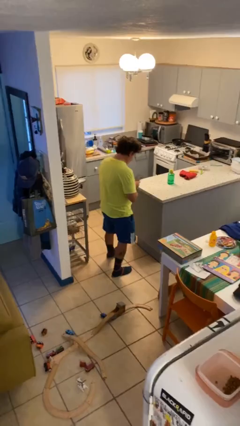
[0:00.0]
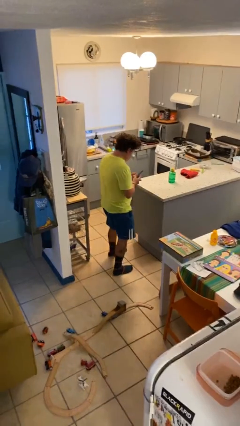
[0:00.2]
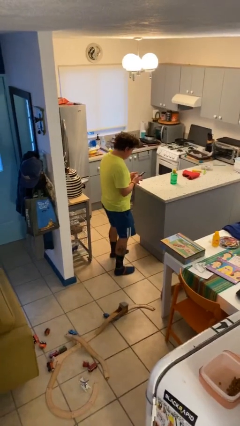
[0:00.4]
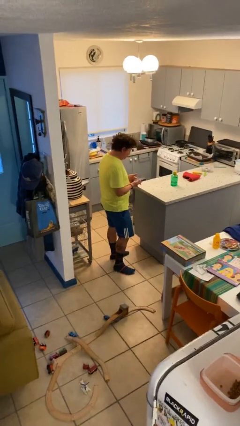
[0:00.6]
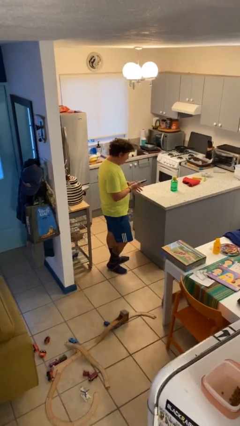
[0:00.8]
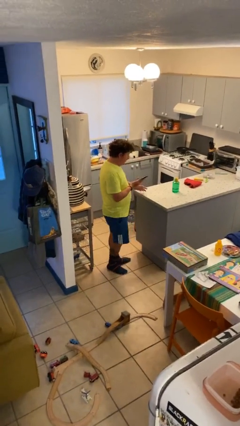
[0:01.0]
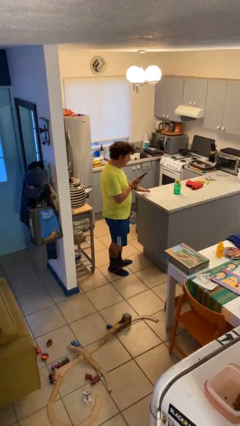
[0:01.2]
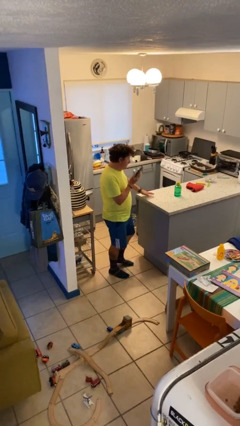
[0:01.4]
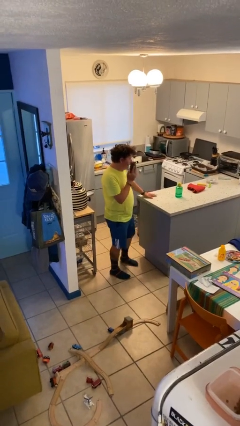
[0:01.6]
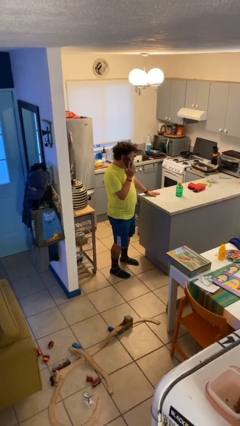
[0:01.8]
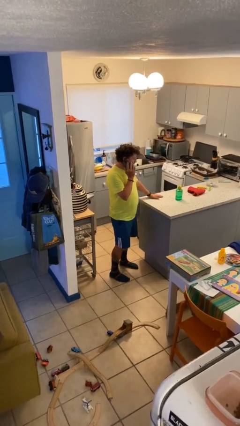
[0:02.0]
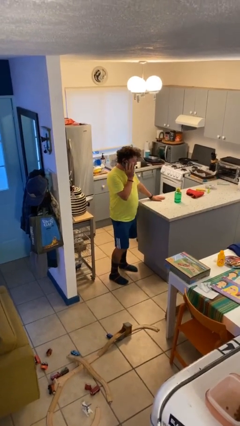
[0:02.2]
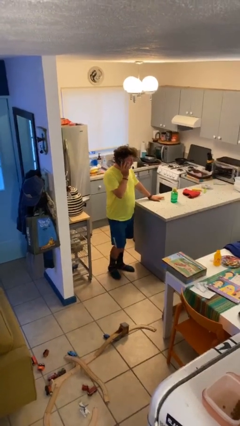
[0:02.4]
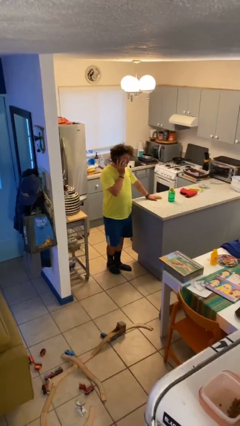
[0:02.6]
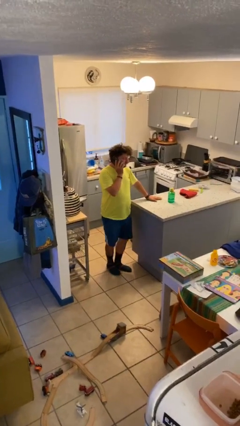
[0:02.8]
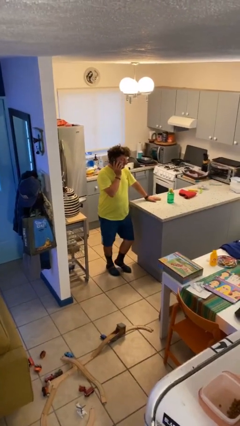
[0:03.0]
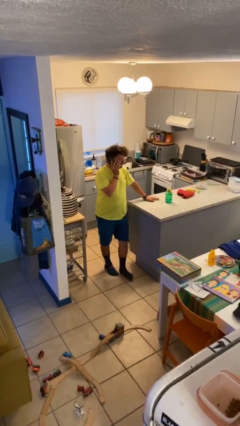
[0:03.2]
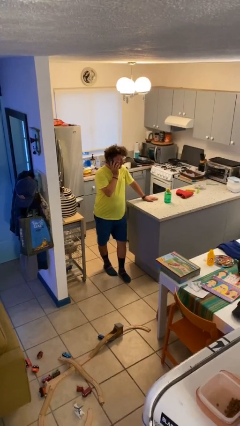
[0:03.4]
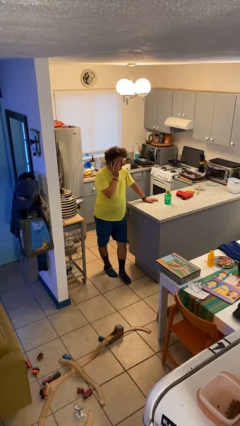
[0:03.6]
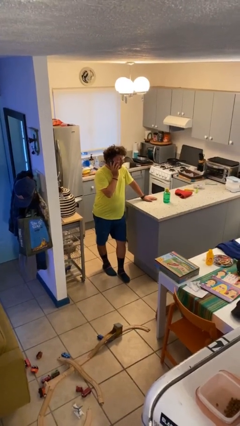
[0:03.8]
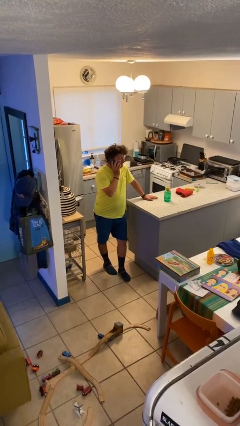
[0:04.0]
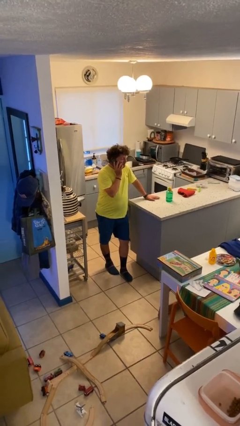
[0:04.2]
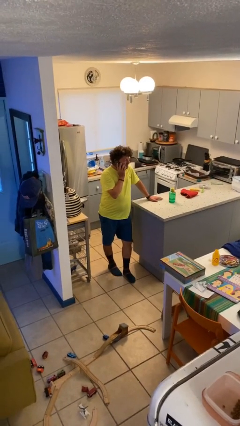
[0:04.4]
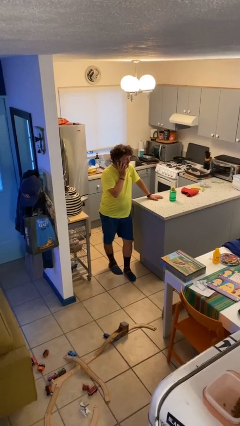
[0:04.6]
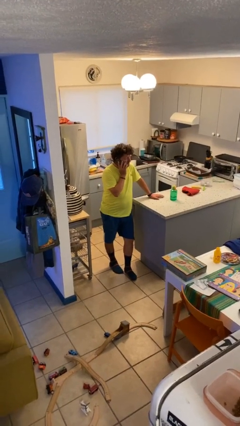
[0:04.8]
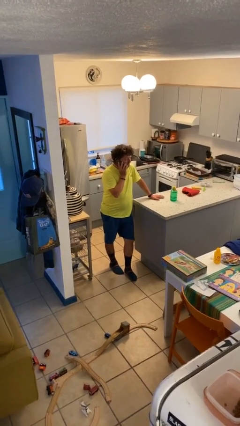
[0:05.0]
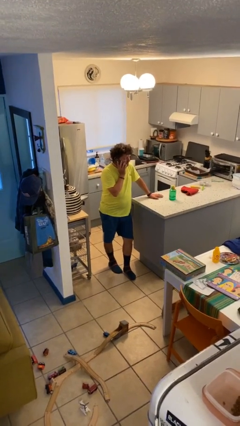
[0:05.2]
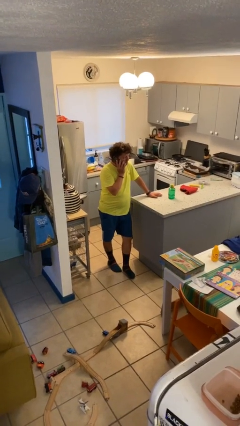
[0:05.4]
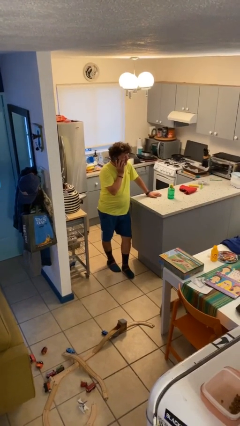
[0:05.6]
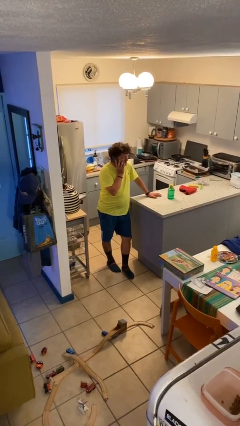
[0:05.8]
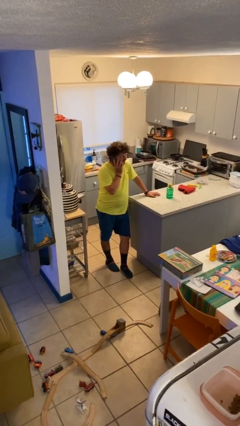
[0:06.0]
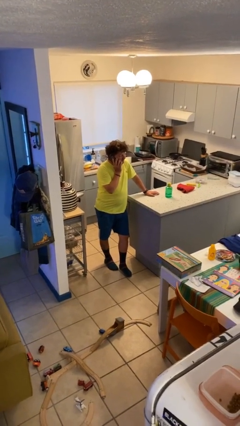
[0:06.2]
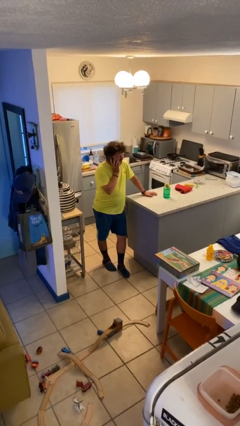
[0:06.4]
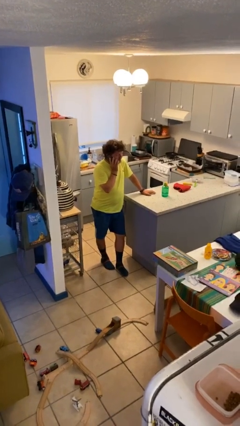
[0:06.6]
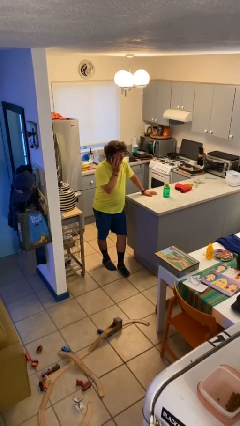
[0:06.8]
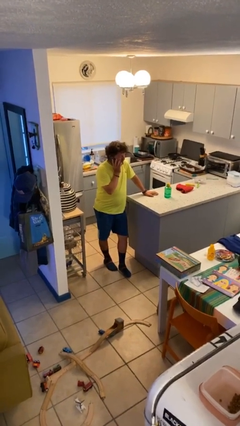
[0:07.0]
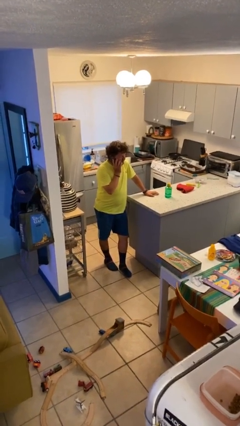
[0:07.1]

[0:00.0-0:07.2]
person talks on phone

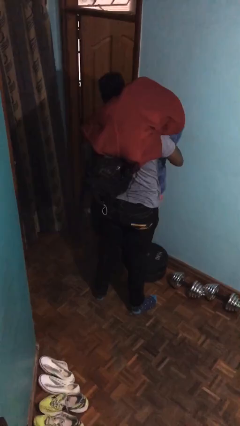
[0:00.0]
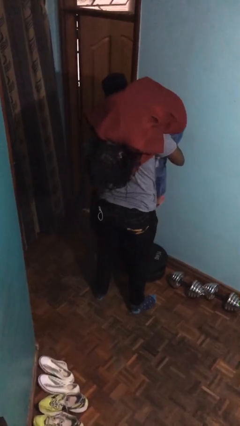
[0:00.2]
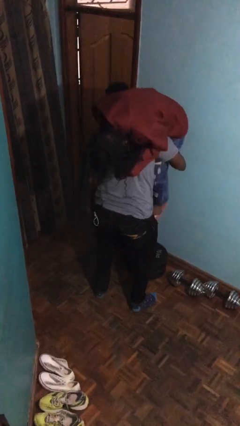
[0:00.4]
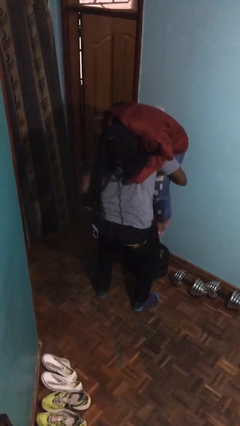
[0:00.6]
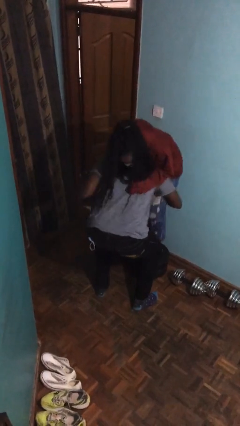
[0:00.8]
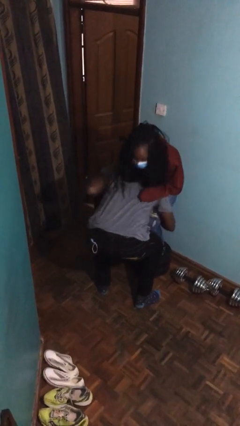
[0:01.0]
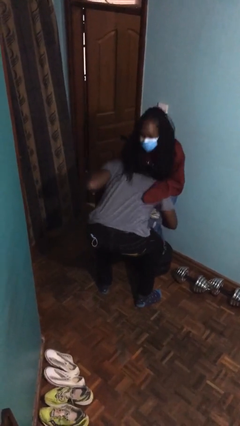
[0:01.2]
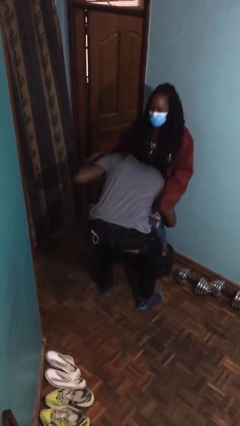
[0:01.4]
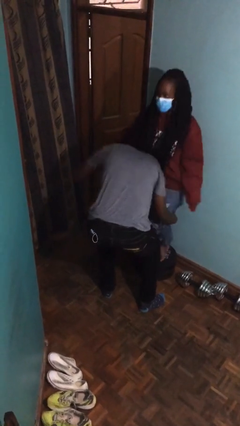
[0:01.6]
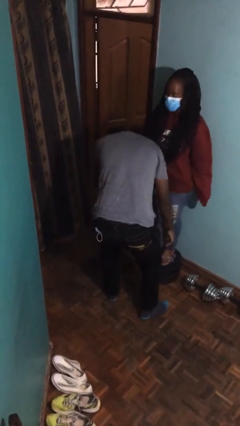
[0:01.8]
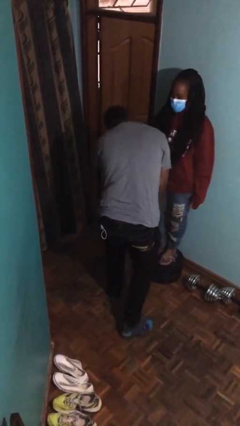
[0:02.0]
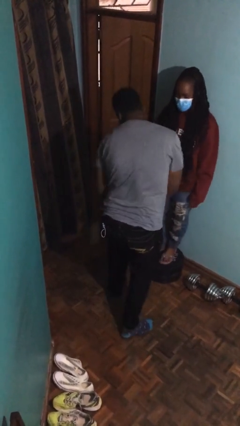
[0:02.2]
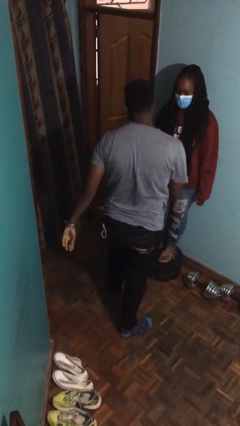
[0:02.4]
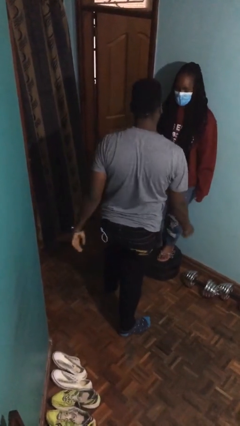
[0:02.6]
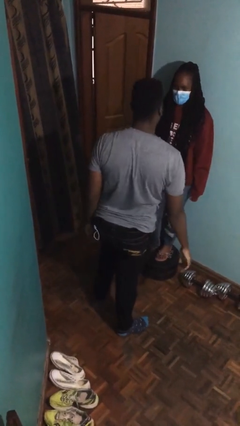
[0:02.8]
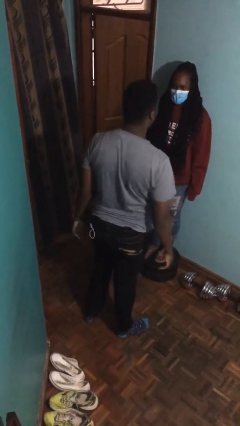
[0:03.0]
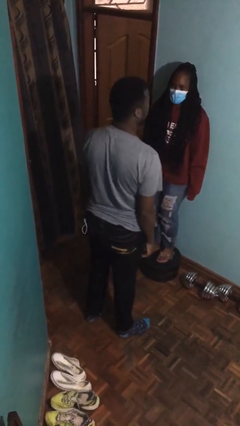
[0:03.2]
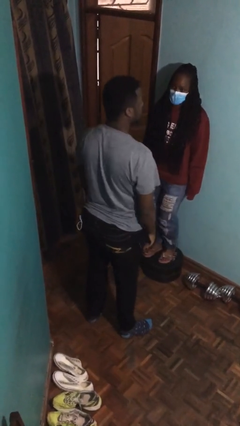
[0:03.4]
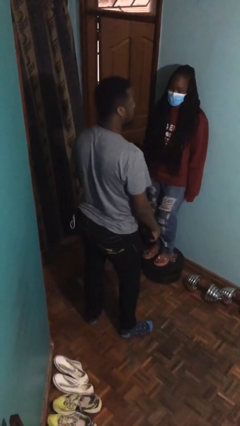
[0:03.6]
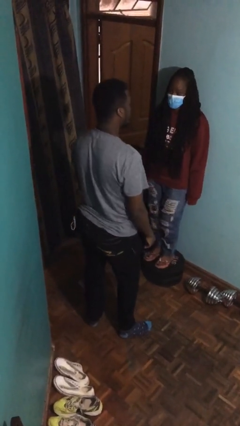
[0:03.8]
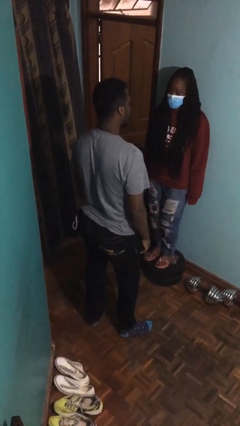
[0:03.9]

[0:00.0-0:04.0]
person puts down person

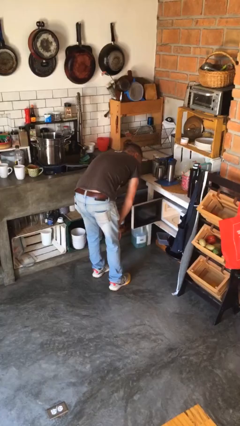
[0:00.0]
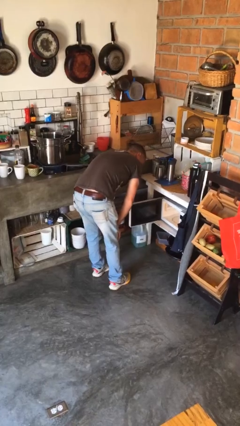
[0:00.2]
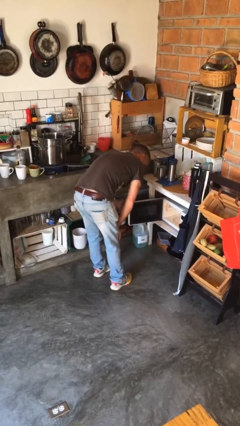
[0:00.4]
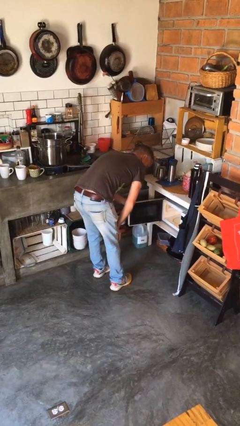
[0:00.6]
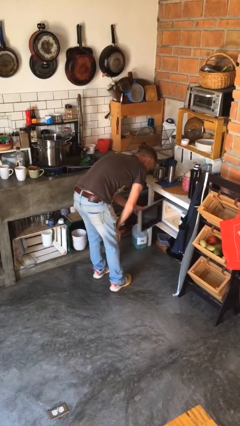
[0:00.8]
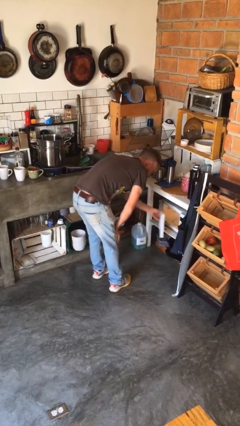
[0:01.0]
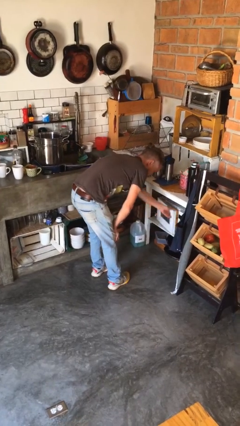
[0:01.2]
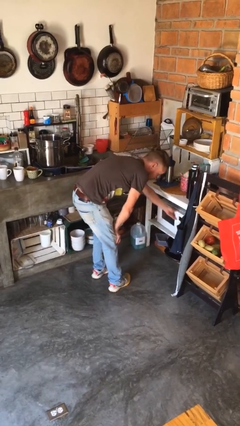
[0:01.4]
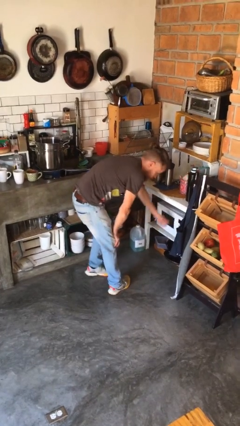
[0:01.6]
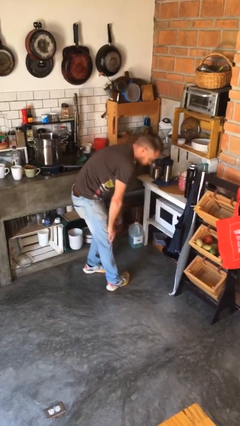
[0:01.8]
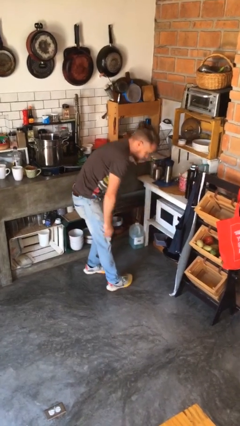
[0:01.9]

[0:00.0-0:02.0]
person closes microwave

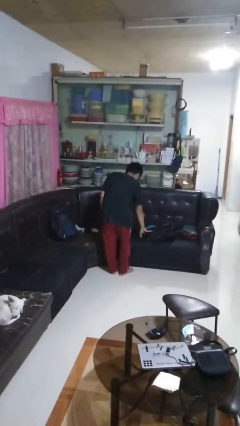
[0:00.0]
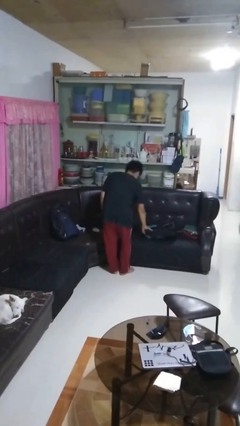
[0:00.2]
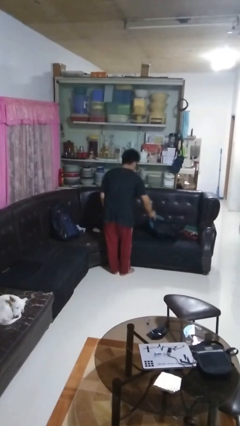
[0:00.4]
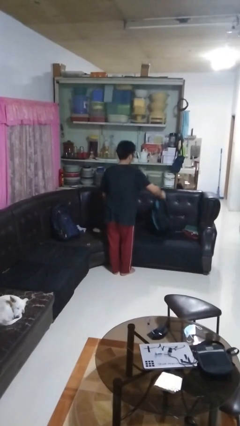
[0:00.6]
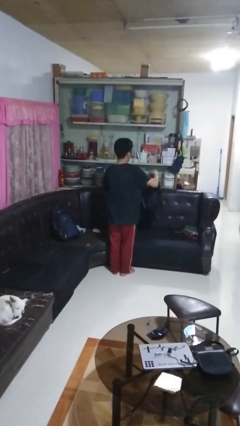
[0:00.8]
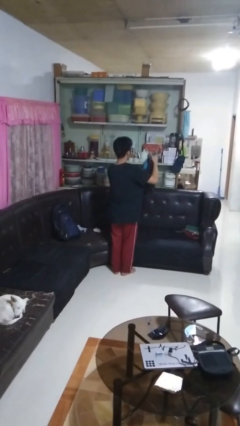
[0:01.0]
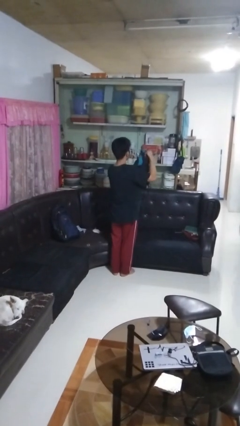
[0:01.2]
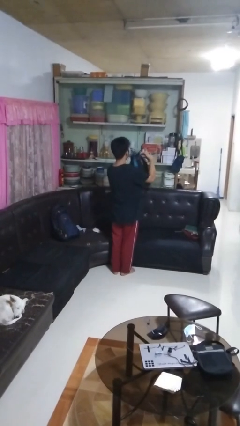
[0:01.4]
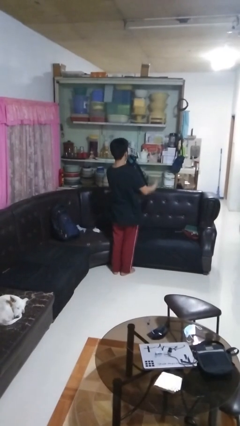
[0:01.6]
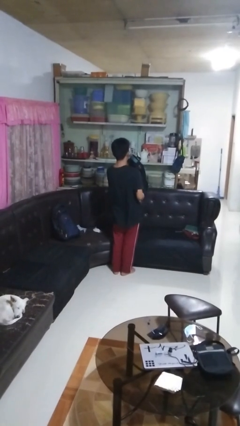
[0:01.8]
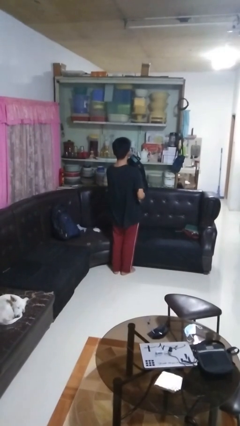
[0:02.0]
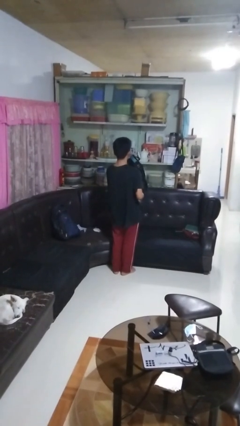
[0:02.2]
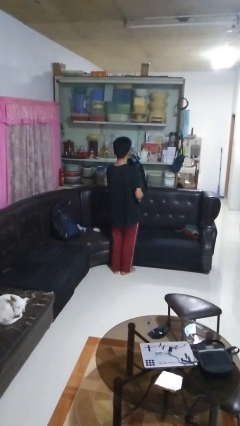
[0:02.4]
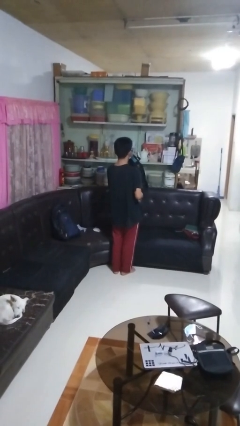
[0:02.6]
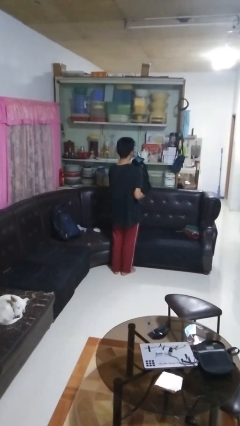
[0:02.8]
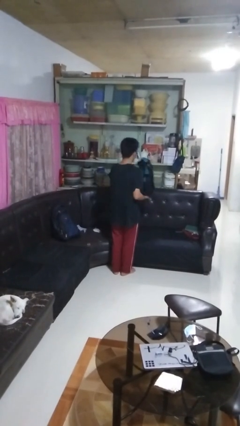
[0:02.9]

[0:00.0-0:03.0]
person picks up object from couch

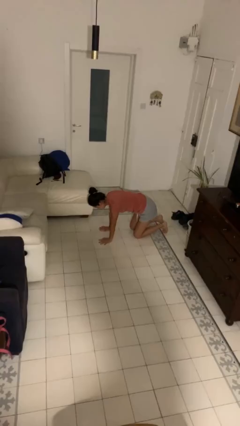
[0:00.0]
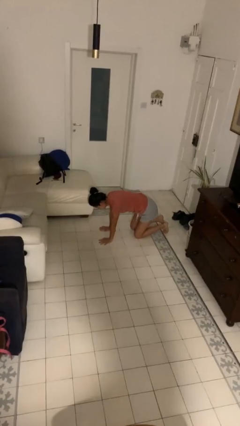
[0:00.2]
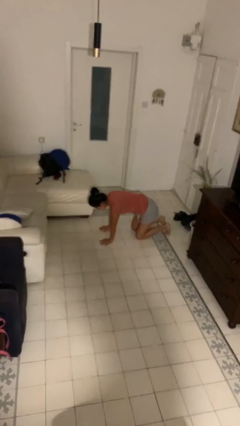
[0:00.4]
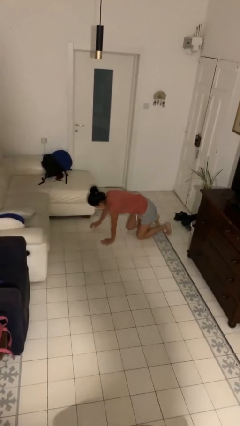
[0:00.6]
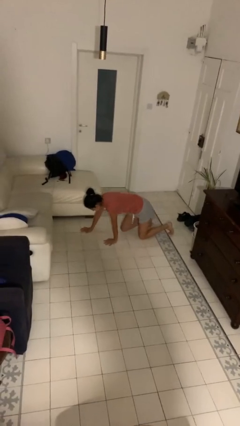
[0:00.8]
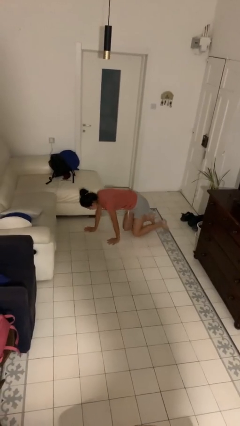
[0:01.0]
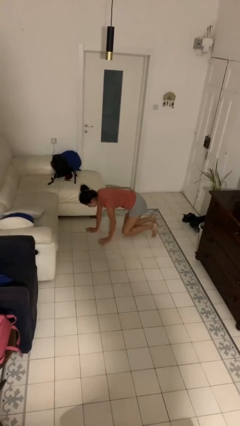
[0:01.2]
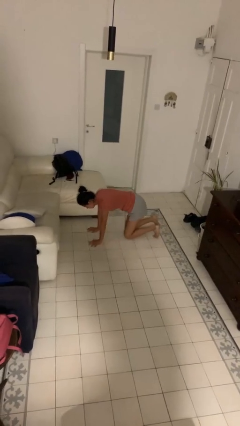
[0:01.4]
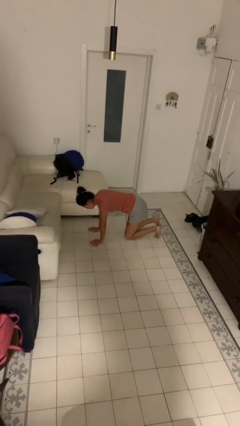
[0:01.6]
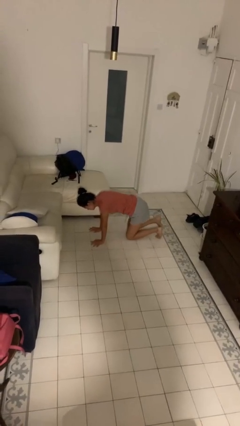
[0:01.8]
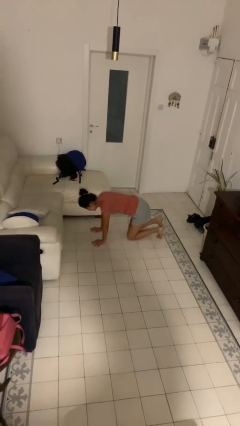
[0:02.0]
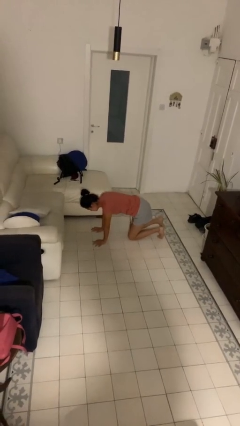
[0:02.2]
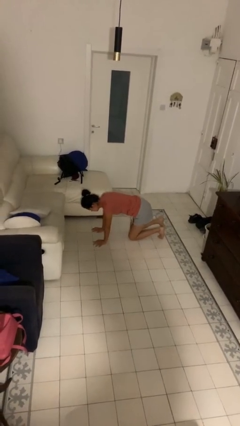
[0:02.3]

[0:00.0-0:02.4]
person crawls
